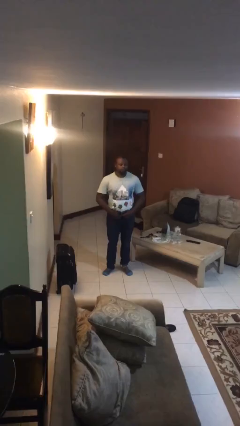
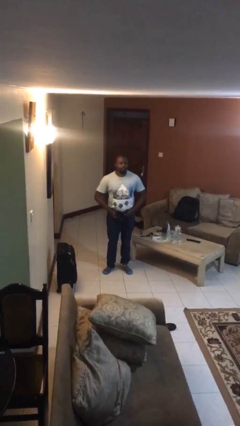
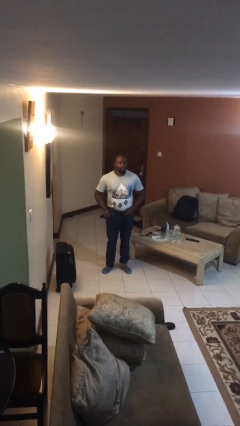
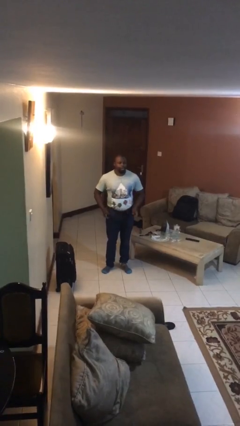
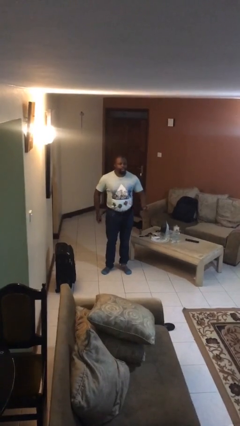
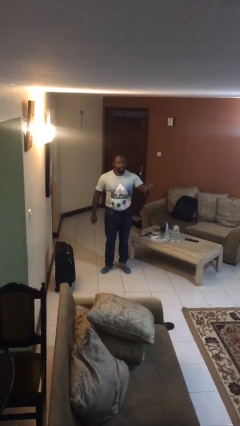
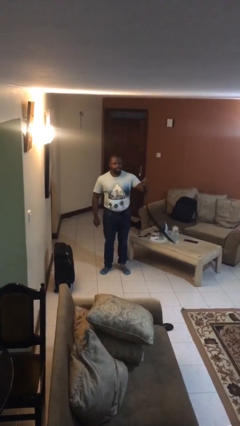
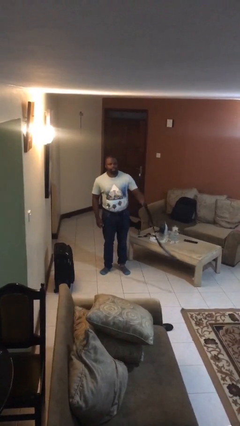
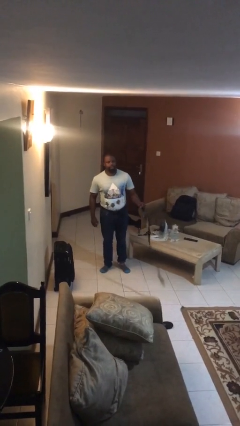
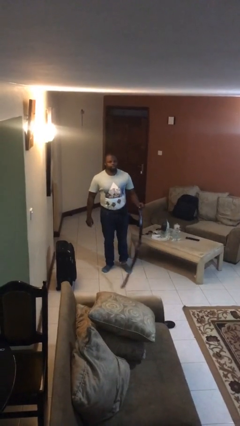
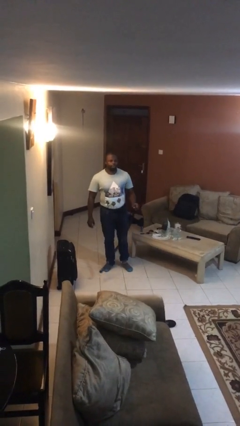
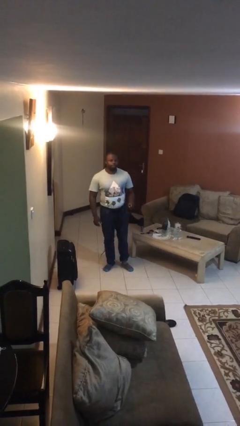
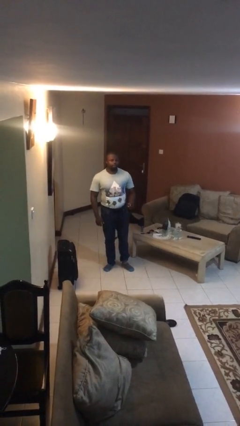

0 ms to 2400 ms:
person takes off belt

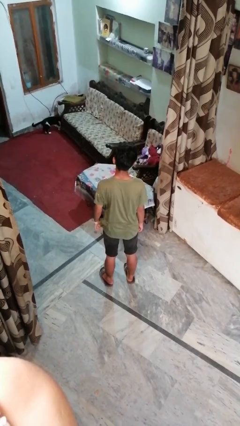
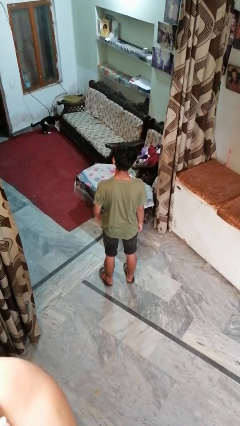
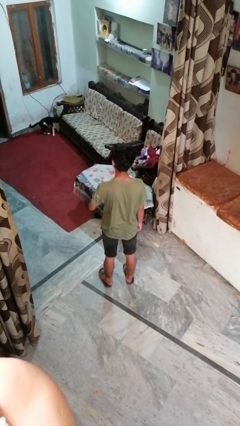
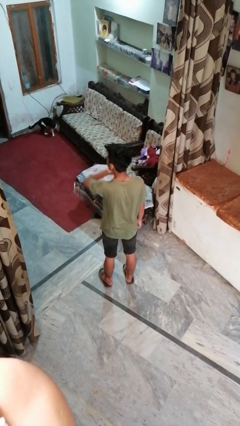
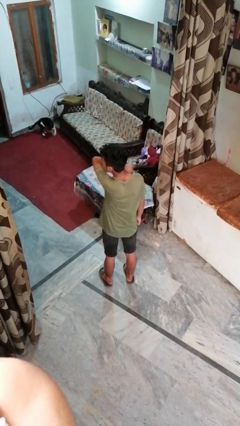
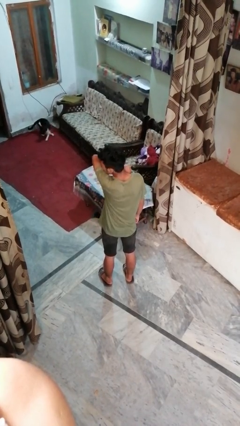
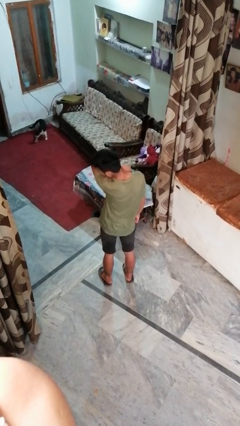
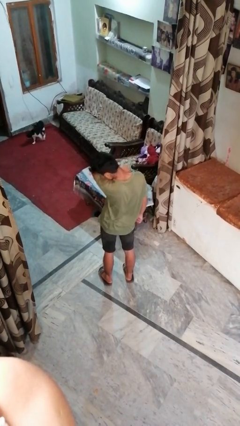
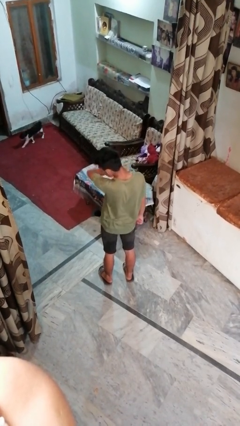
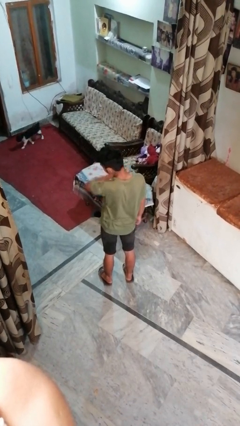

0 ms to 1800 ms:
person sneezes into arm

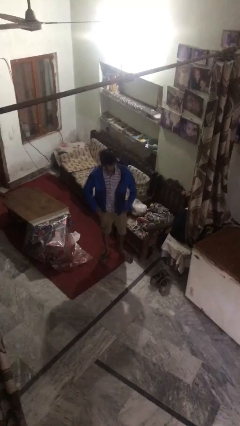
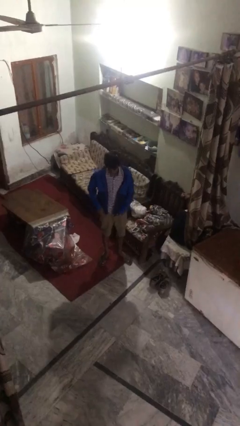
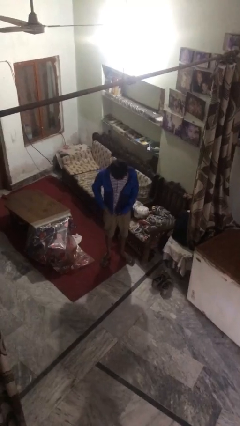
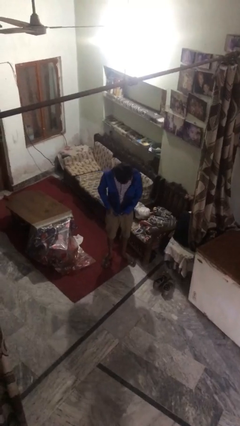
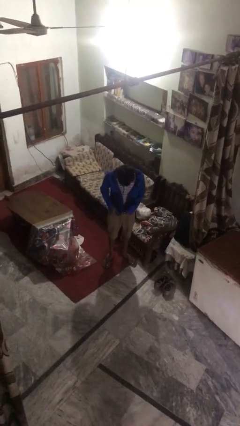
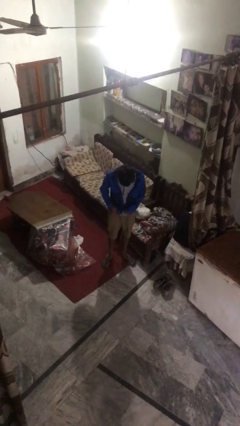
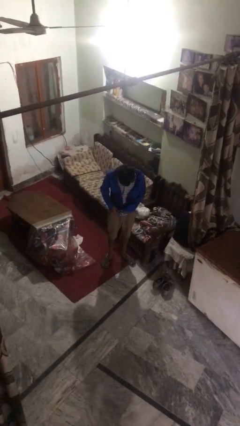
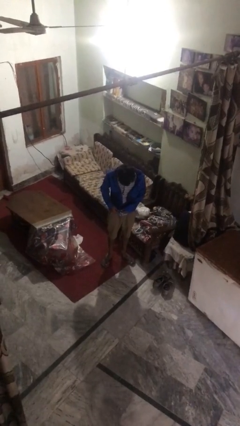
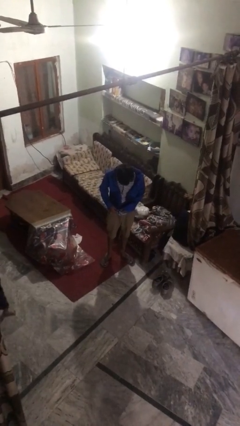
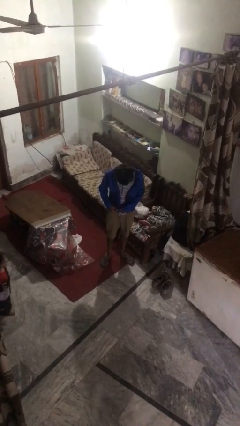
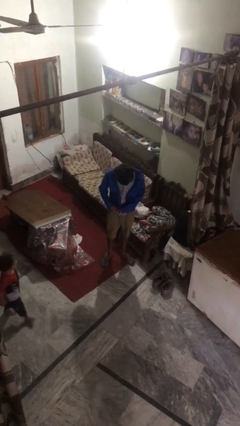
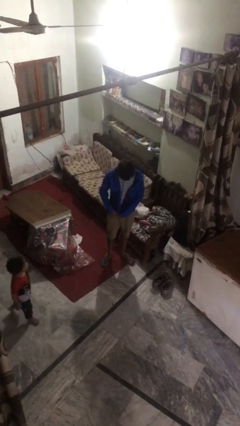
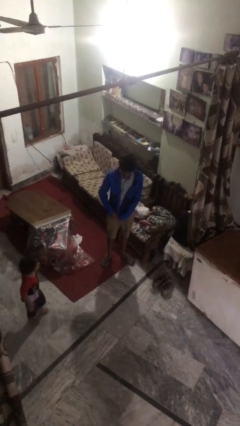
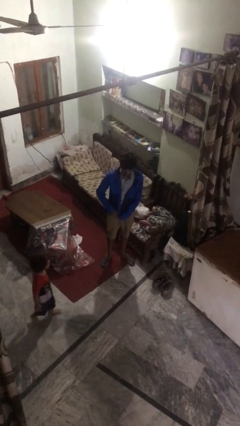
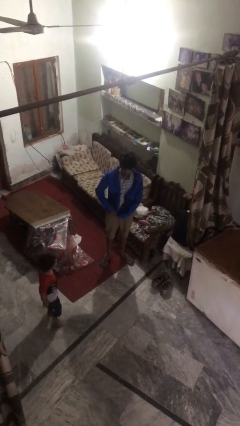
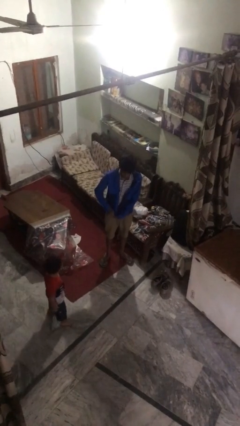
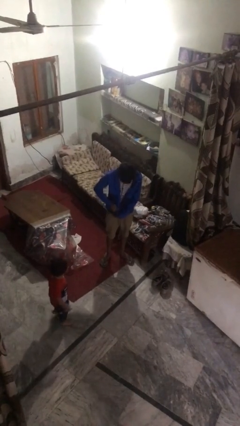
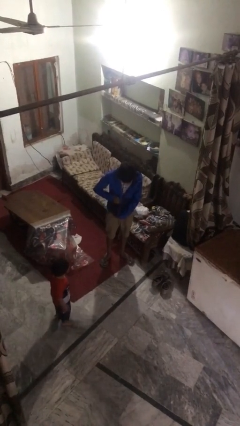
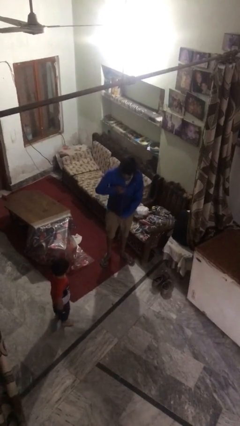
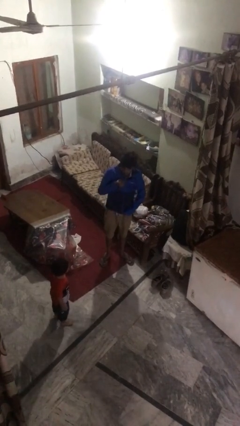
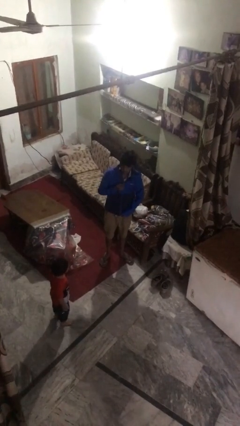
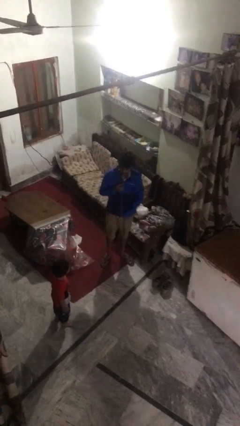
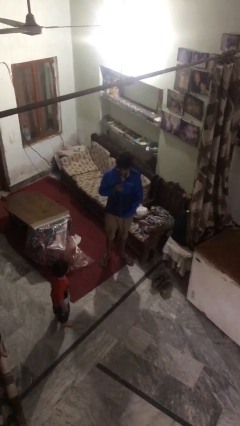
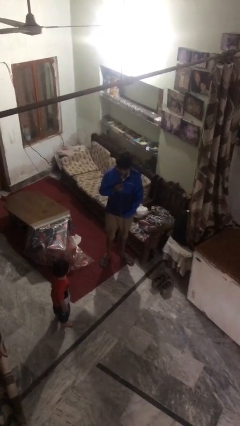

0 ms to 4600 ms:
person zips up jacket

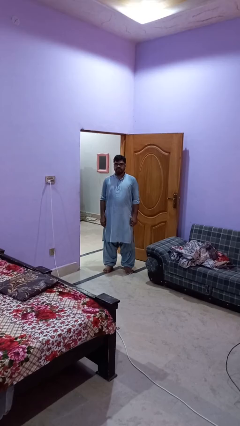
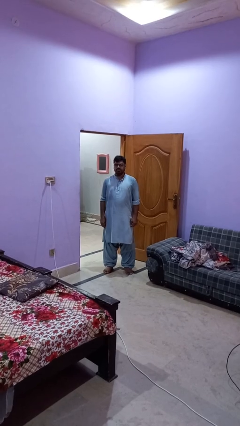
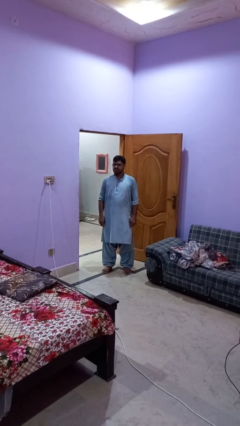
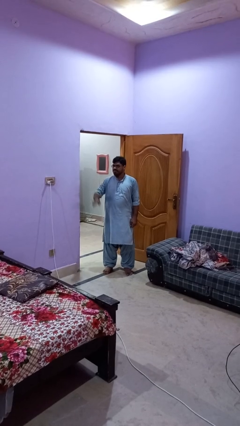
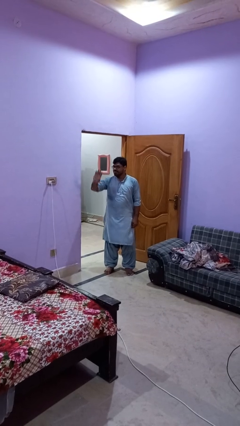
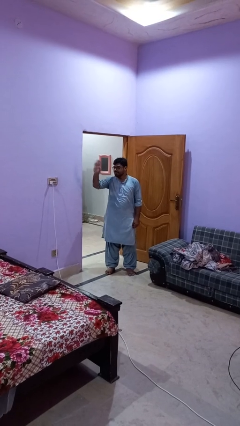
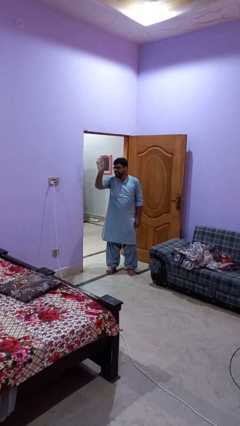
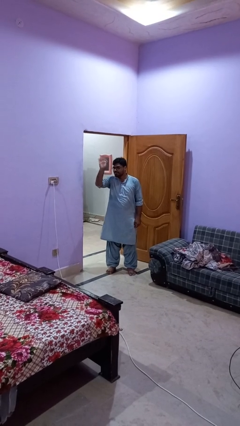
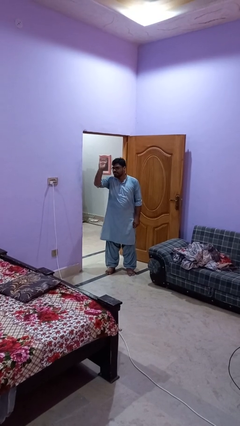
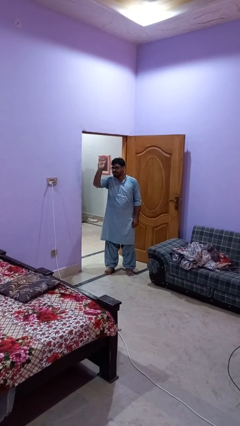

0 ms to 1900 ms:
person waves at person

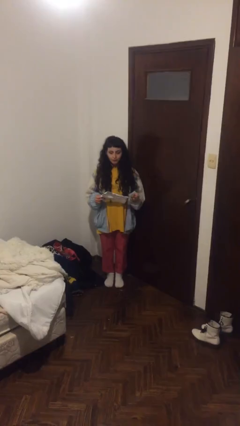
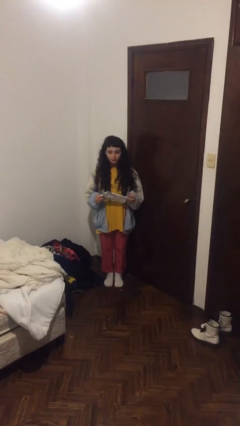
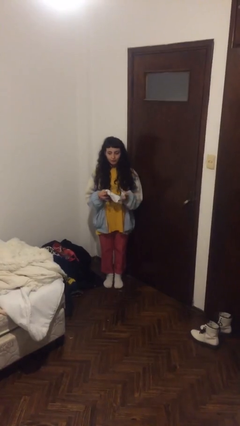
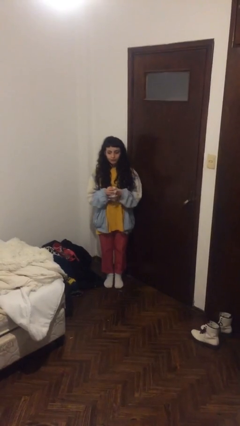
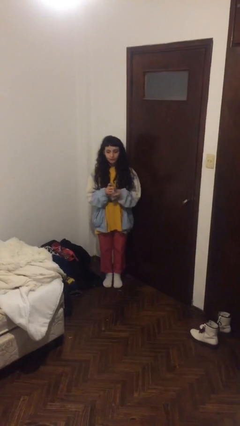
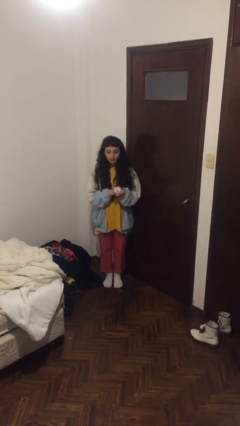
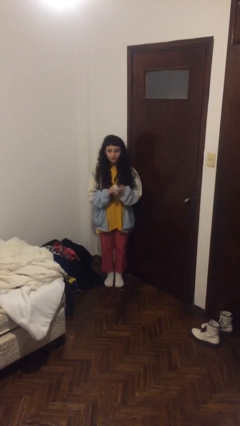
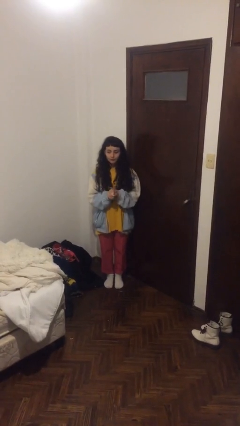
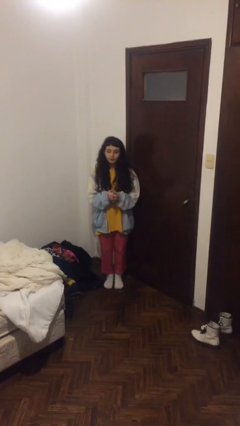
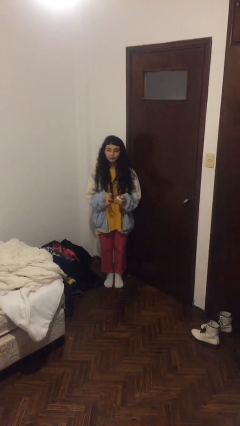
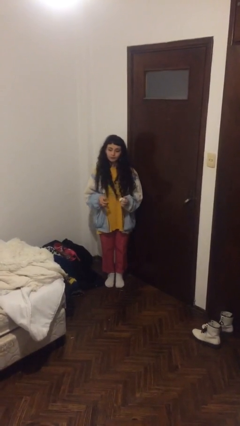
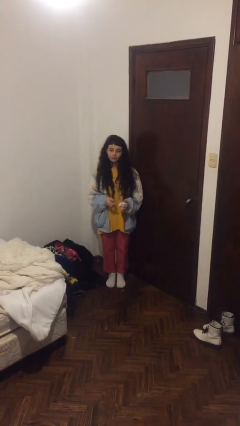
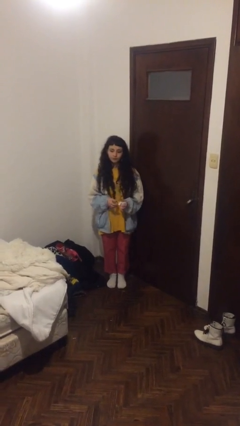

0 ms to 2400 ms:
person crumples paper

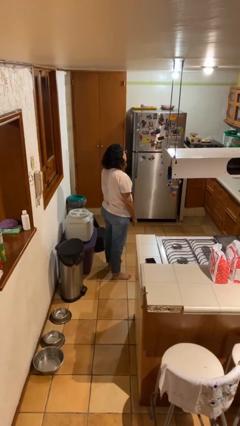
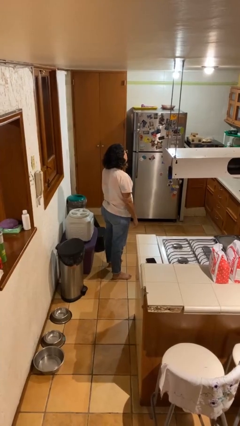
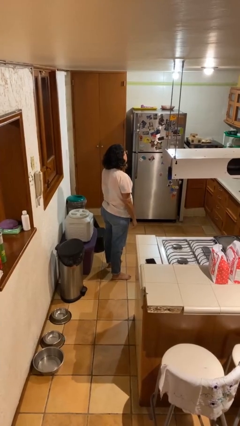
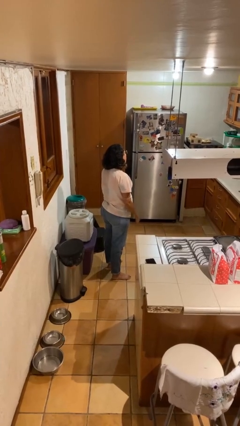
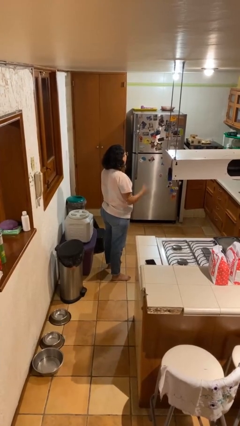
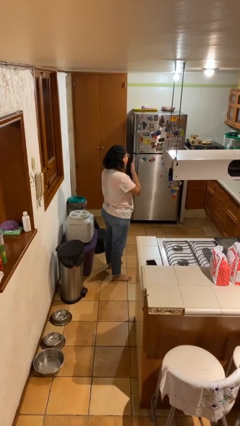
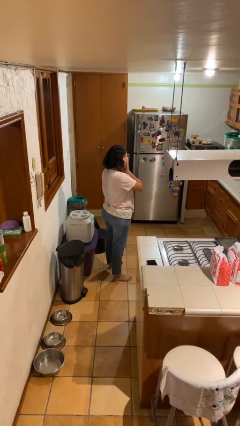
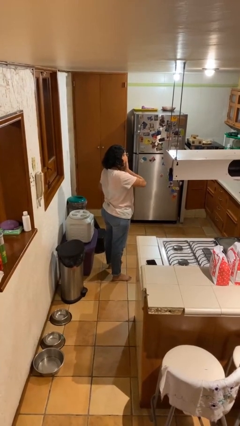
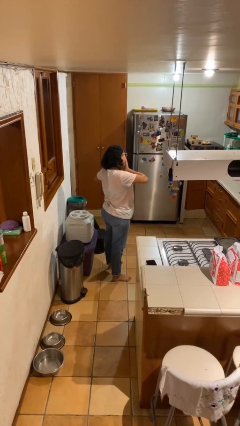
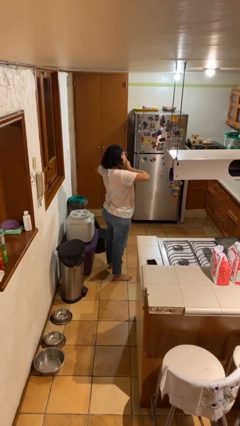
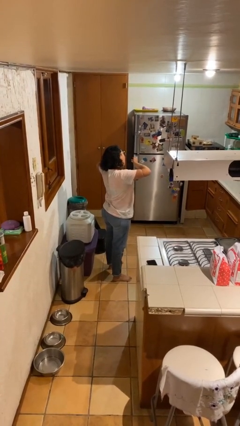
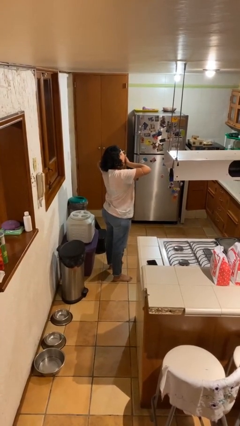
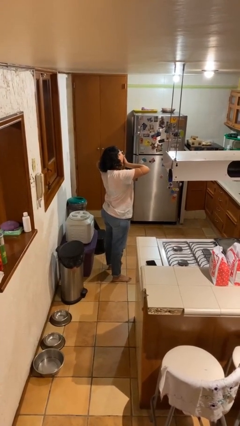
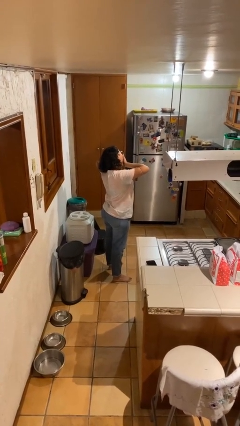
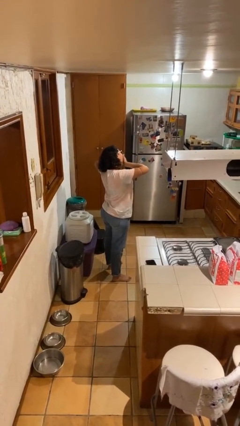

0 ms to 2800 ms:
person yawns

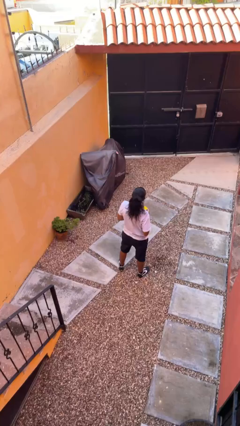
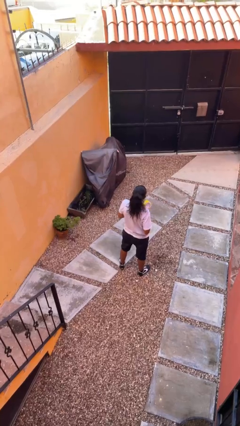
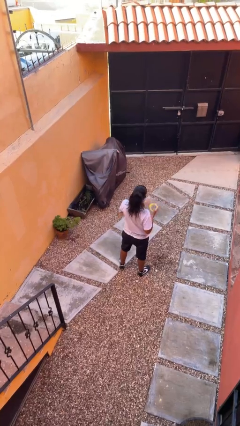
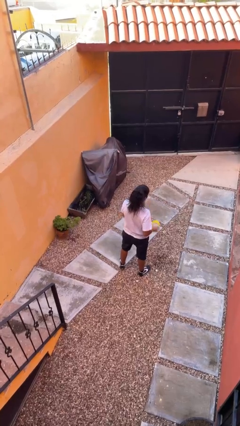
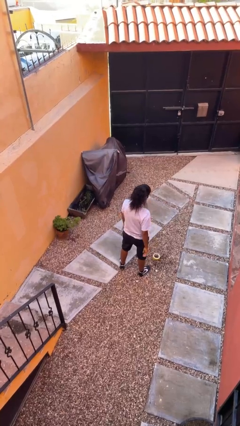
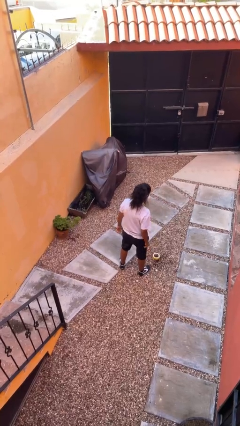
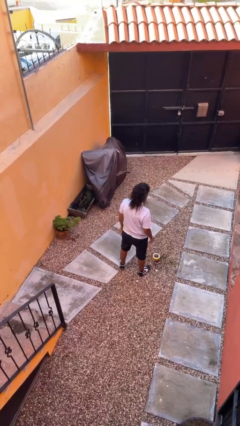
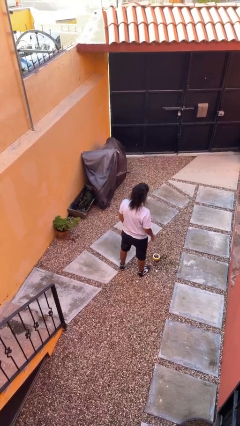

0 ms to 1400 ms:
person drops object
